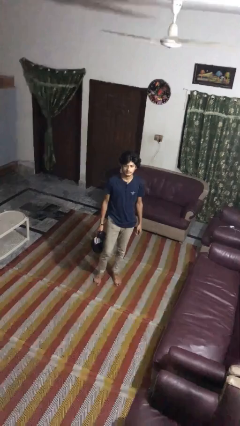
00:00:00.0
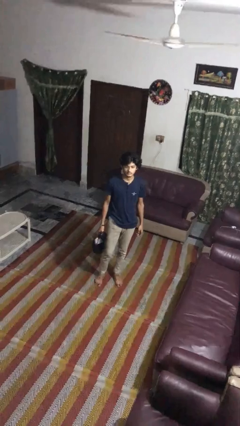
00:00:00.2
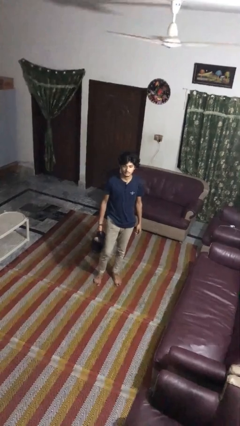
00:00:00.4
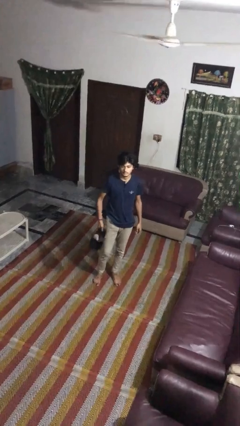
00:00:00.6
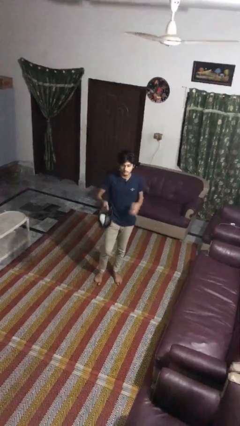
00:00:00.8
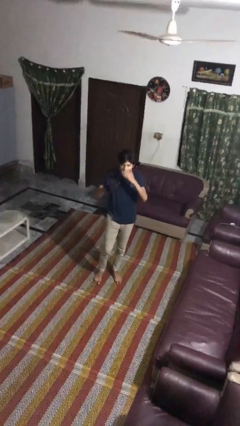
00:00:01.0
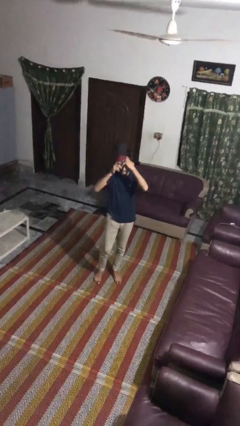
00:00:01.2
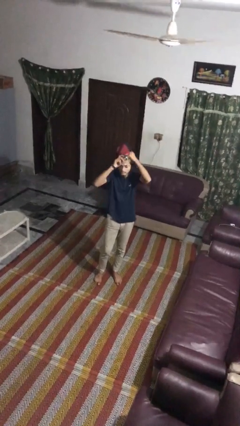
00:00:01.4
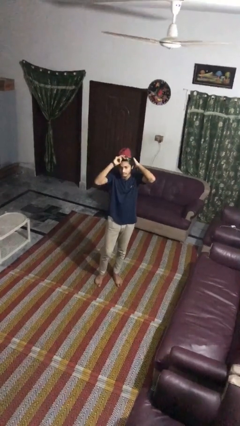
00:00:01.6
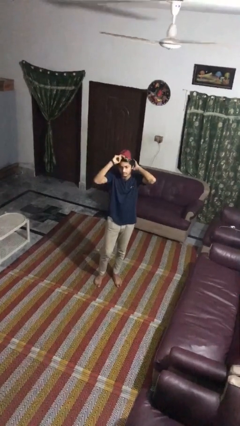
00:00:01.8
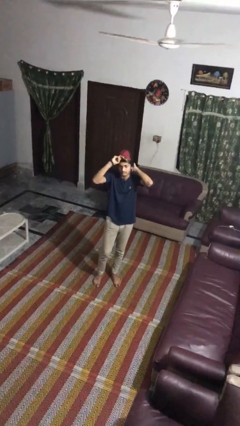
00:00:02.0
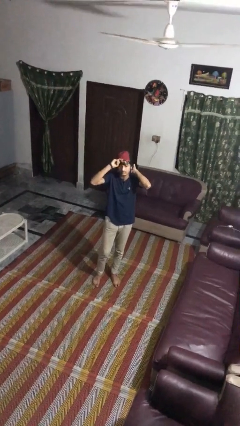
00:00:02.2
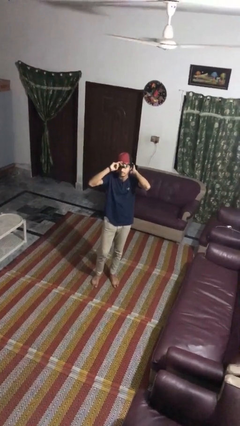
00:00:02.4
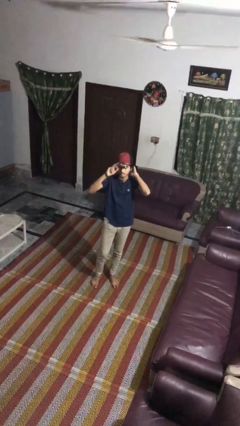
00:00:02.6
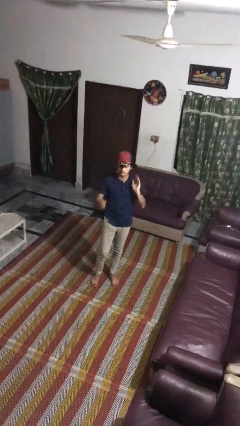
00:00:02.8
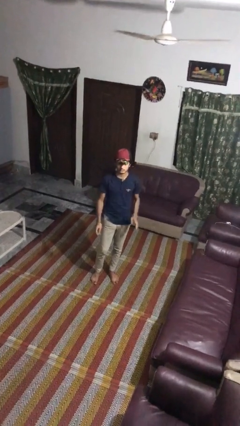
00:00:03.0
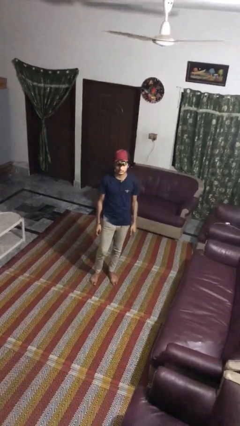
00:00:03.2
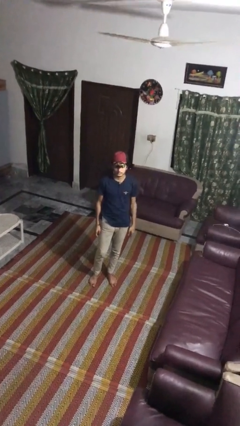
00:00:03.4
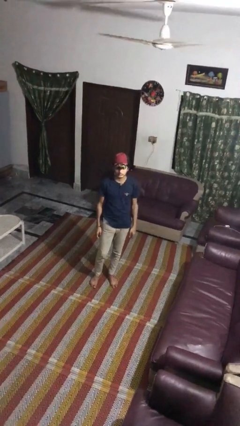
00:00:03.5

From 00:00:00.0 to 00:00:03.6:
person puts on hat

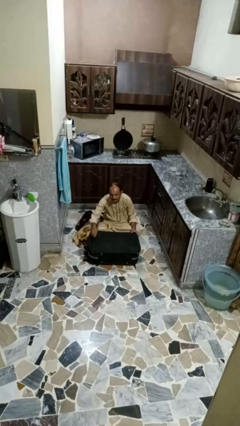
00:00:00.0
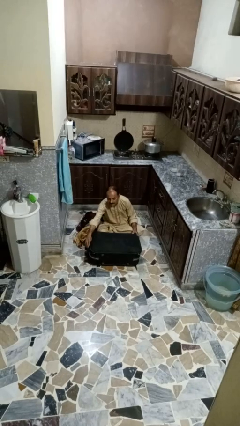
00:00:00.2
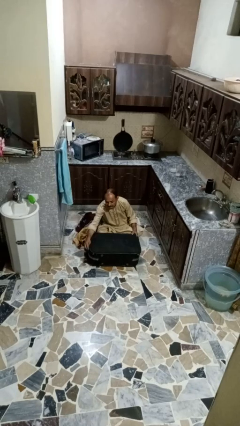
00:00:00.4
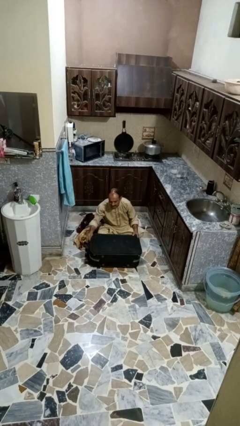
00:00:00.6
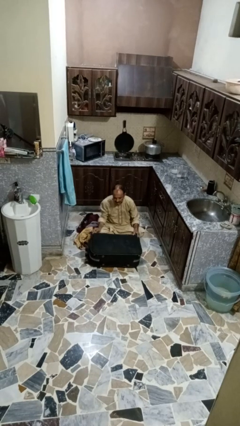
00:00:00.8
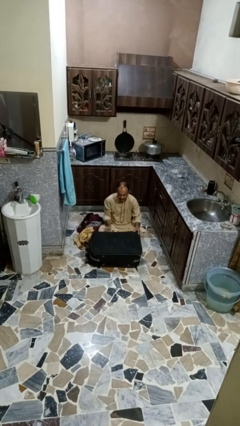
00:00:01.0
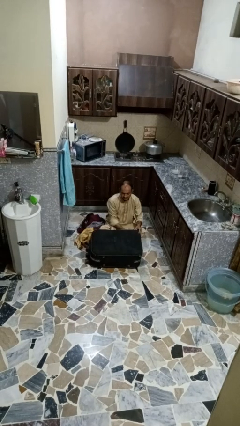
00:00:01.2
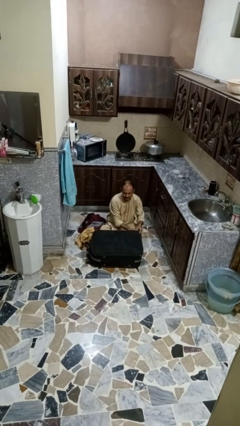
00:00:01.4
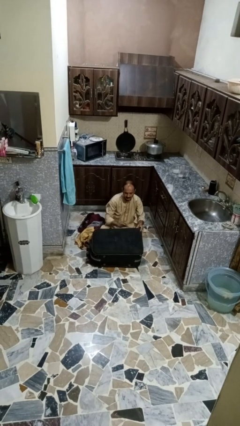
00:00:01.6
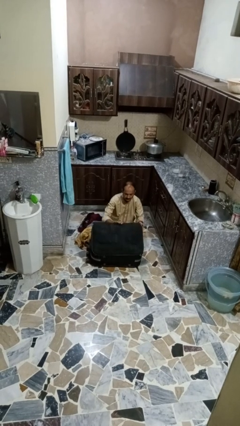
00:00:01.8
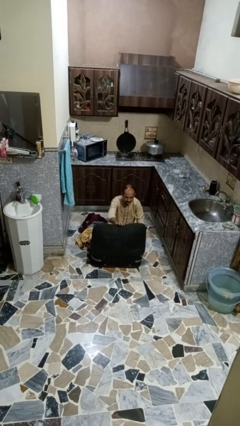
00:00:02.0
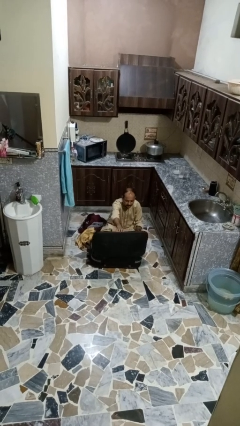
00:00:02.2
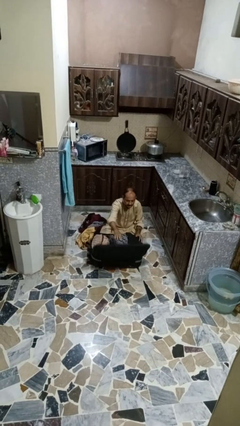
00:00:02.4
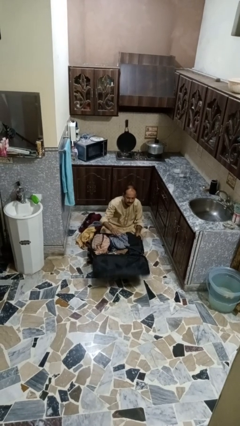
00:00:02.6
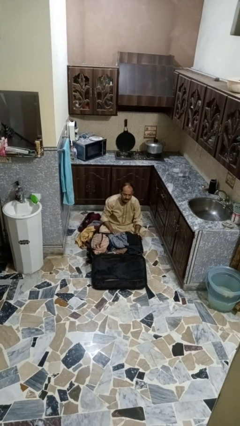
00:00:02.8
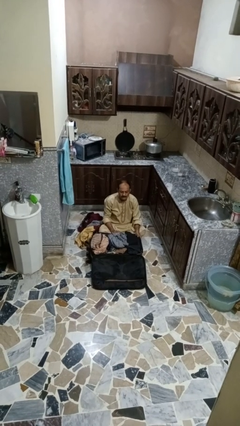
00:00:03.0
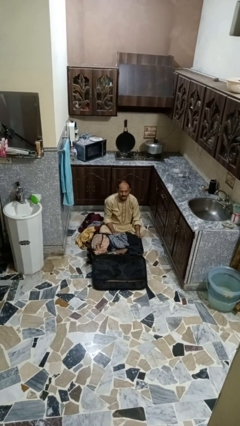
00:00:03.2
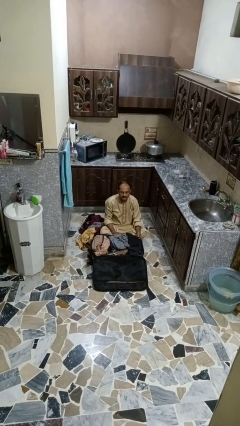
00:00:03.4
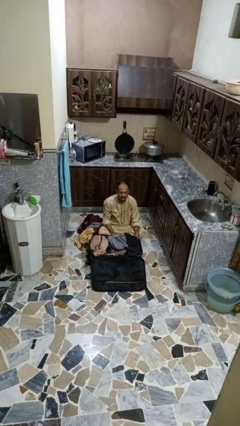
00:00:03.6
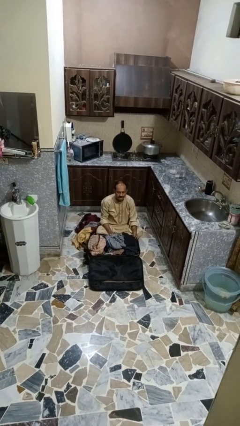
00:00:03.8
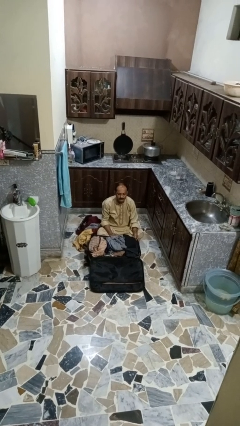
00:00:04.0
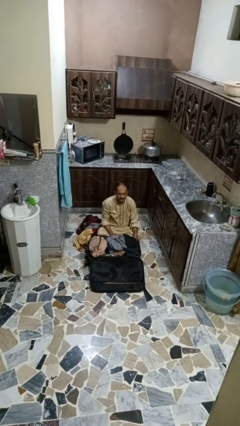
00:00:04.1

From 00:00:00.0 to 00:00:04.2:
person opens suitcase

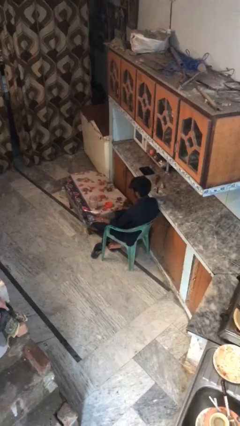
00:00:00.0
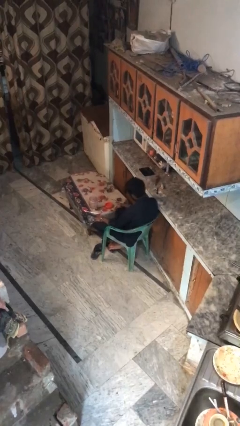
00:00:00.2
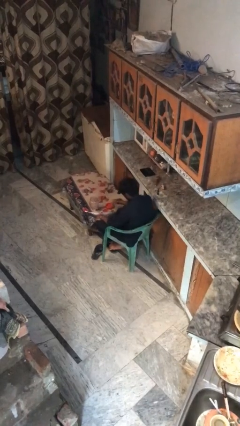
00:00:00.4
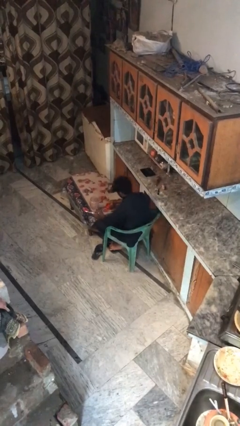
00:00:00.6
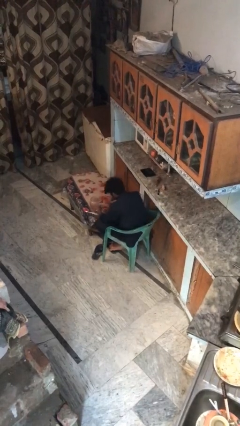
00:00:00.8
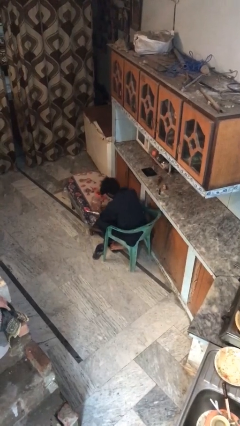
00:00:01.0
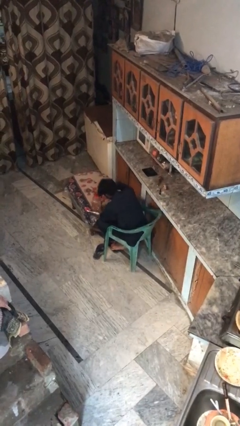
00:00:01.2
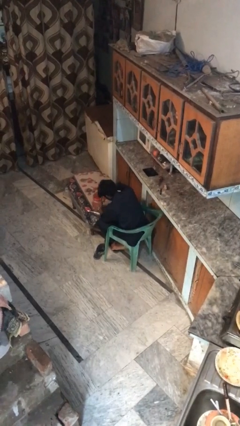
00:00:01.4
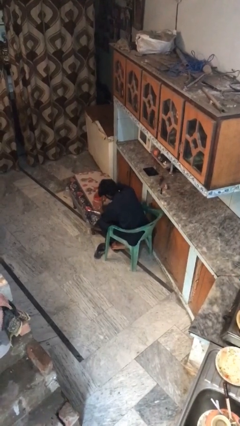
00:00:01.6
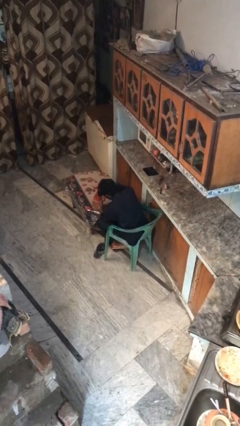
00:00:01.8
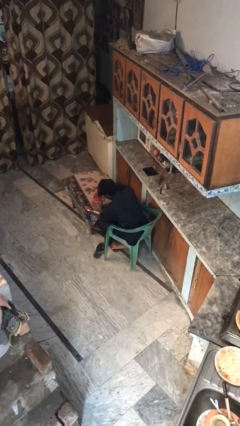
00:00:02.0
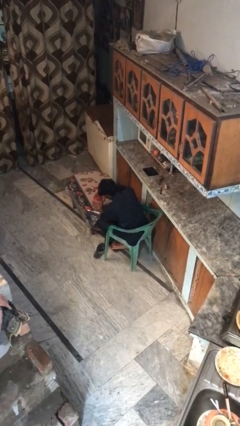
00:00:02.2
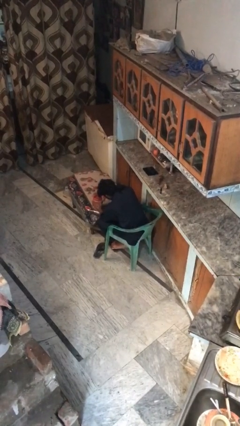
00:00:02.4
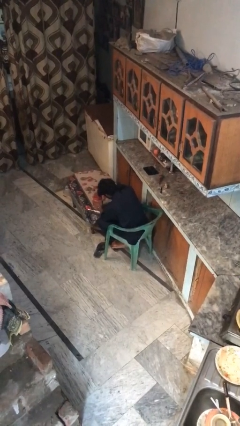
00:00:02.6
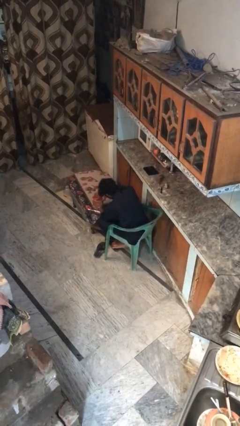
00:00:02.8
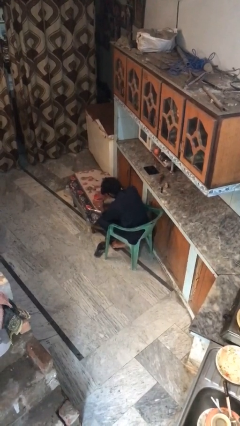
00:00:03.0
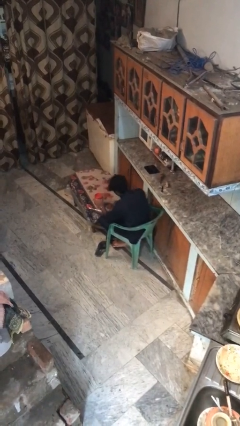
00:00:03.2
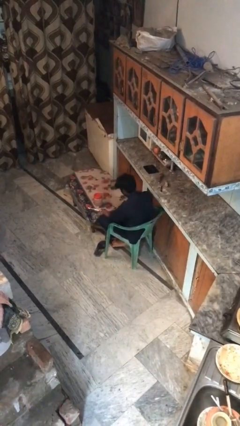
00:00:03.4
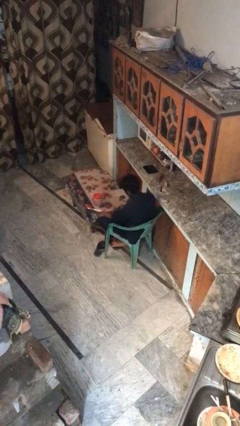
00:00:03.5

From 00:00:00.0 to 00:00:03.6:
person closes jar

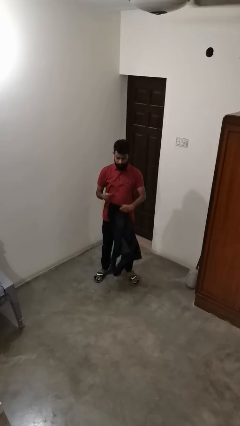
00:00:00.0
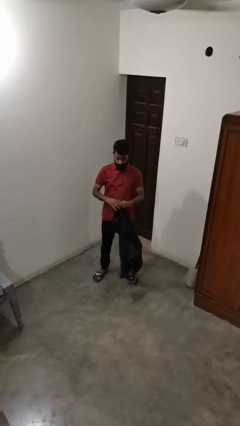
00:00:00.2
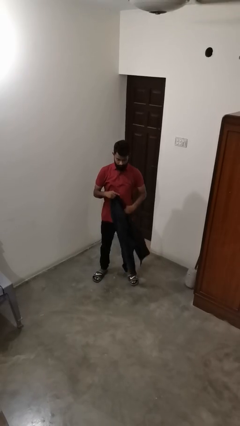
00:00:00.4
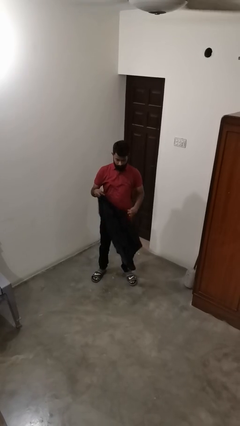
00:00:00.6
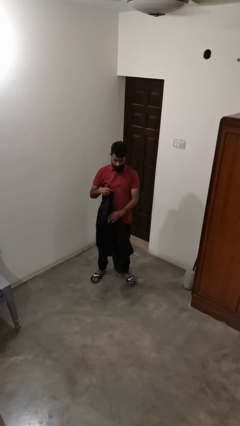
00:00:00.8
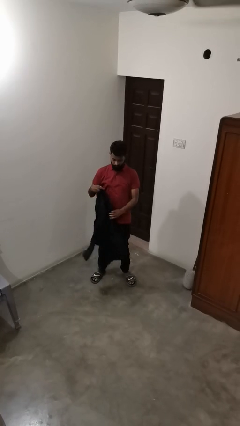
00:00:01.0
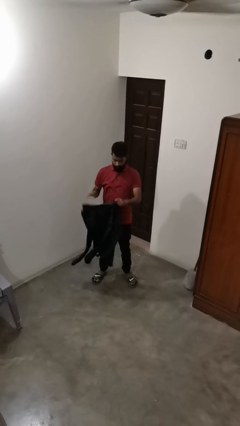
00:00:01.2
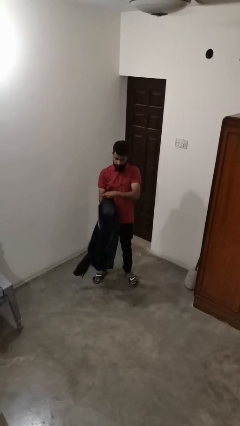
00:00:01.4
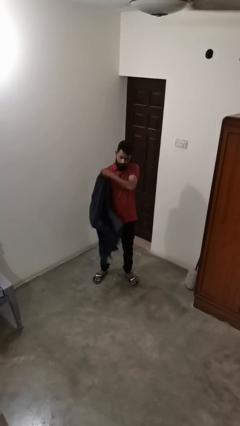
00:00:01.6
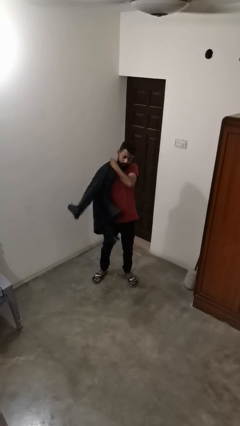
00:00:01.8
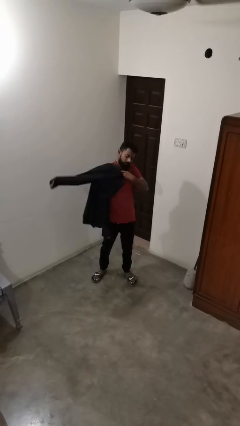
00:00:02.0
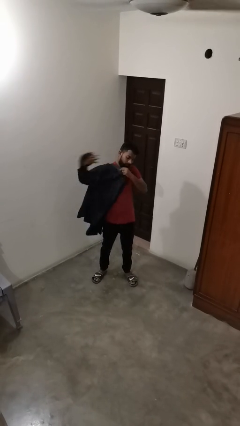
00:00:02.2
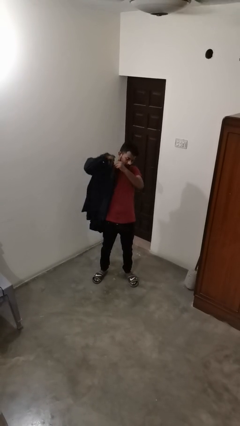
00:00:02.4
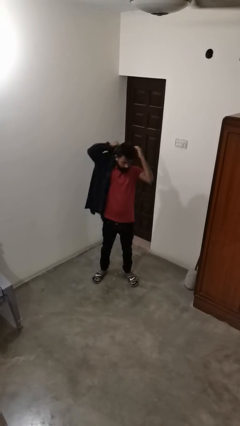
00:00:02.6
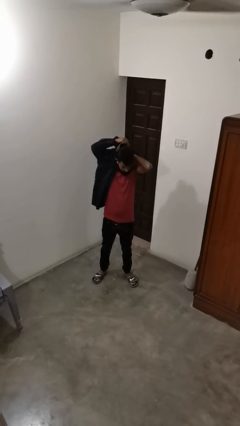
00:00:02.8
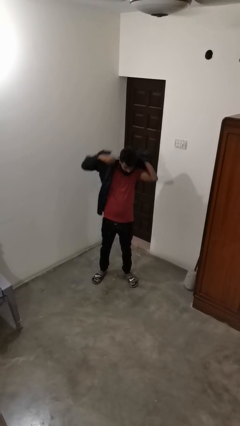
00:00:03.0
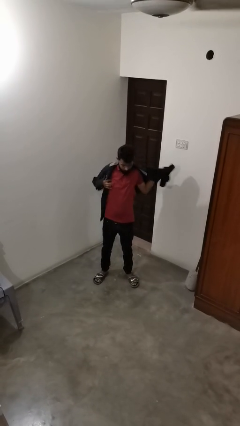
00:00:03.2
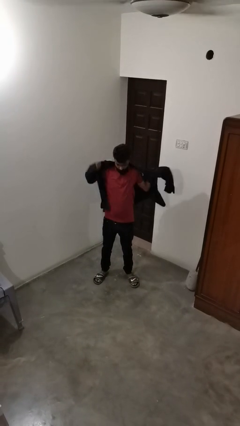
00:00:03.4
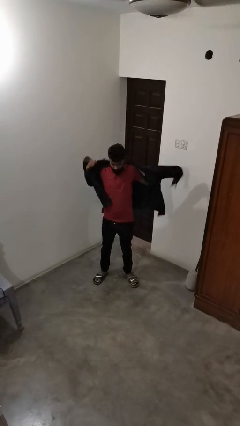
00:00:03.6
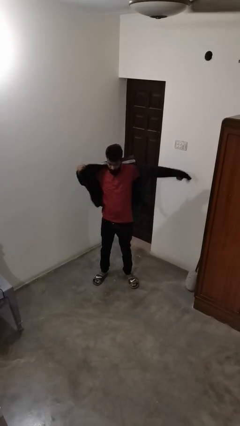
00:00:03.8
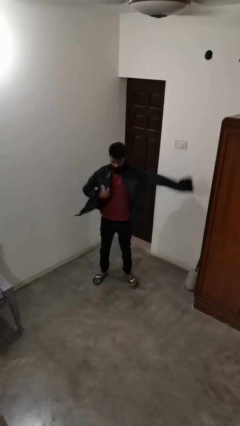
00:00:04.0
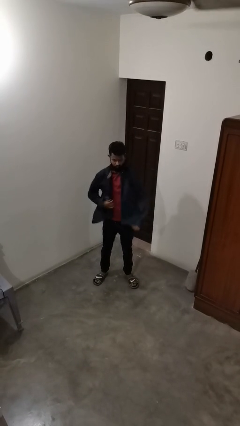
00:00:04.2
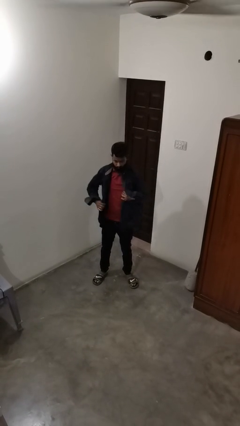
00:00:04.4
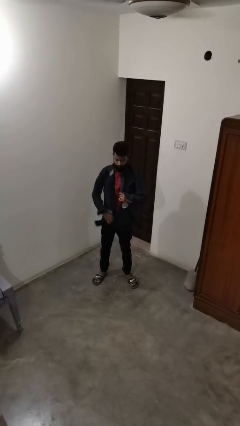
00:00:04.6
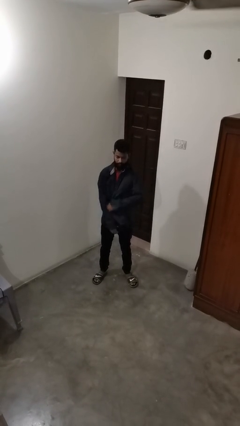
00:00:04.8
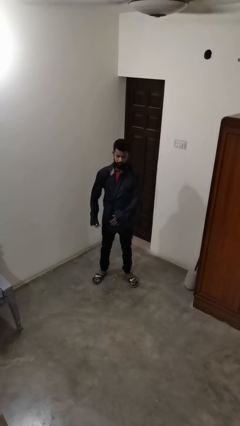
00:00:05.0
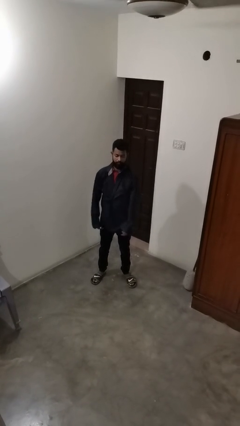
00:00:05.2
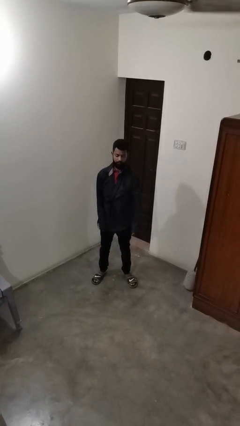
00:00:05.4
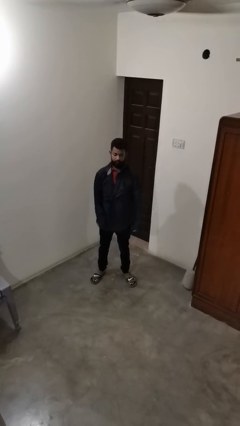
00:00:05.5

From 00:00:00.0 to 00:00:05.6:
person puts on shirt

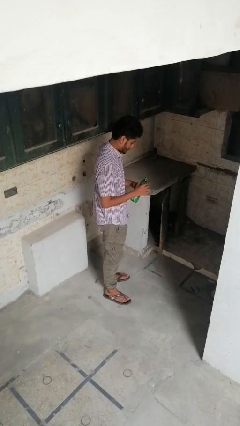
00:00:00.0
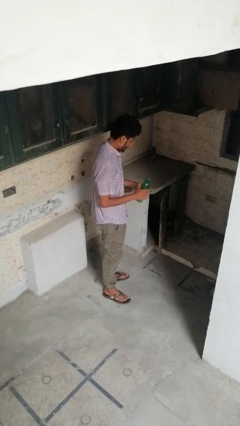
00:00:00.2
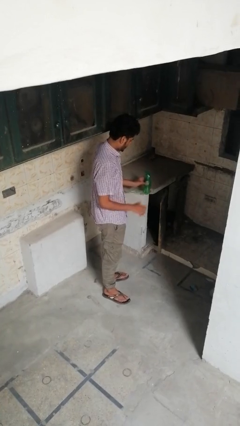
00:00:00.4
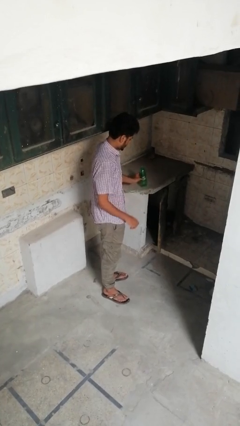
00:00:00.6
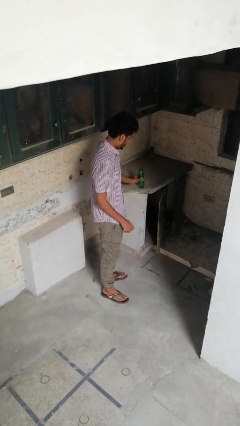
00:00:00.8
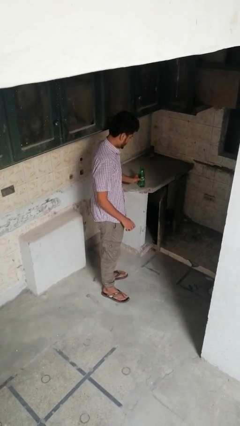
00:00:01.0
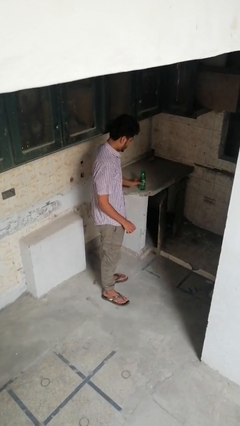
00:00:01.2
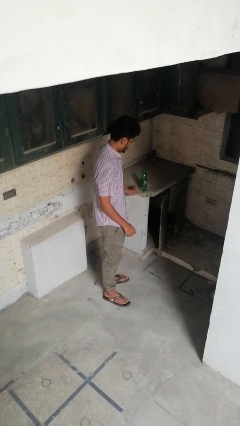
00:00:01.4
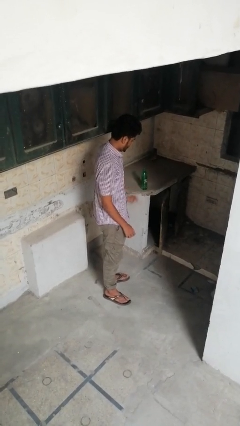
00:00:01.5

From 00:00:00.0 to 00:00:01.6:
person puts down object on countertop
